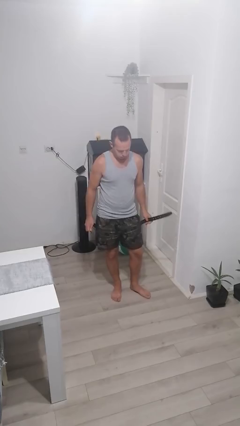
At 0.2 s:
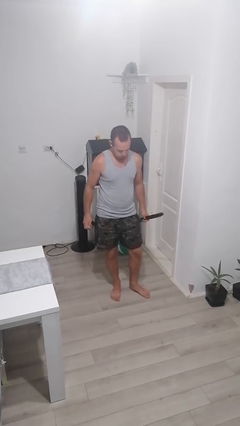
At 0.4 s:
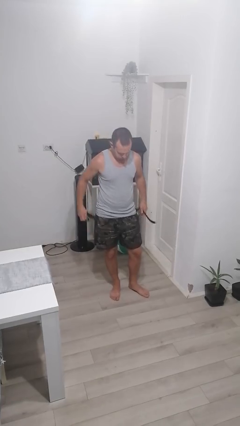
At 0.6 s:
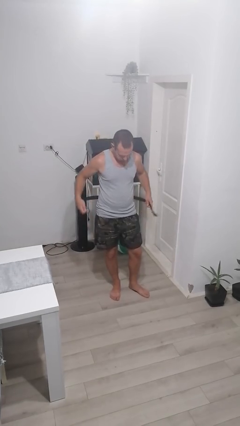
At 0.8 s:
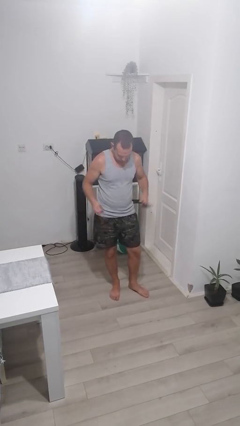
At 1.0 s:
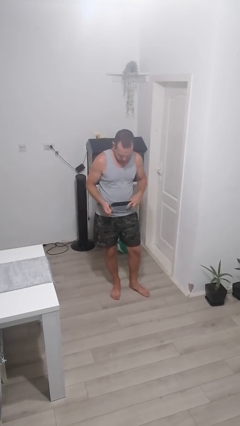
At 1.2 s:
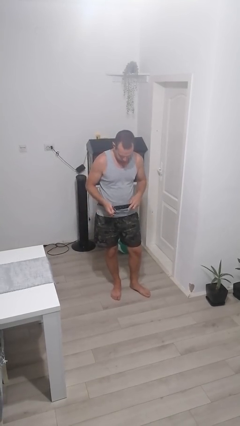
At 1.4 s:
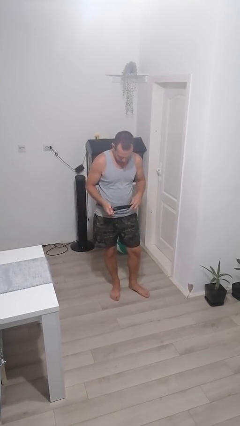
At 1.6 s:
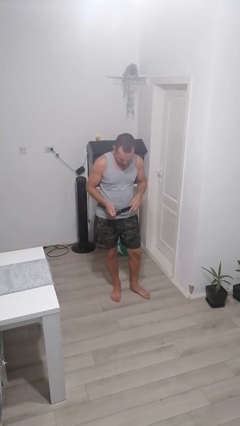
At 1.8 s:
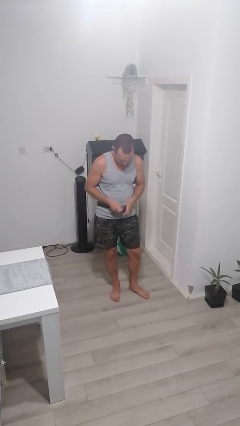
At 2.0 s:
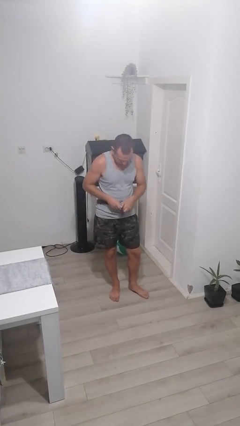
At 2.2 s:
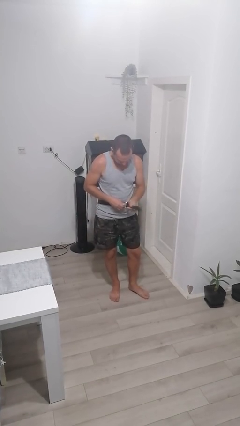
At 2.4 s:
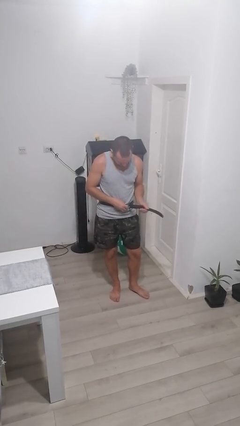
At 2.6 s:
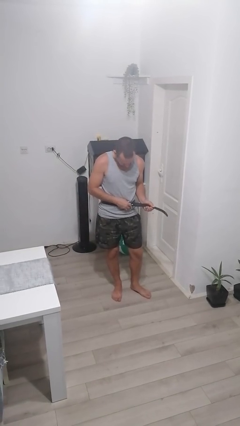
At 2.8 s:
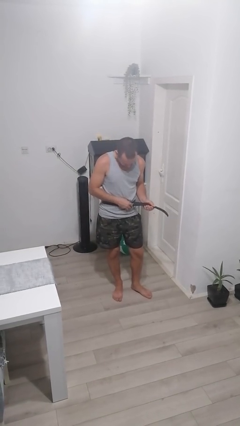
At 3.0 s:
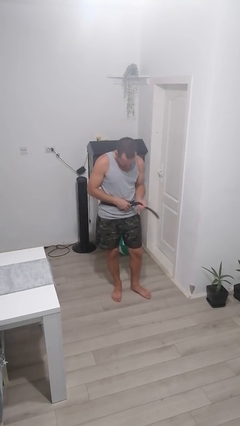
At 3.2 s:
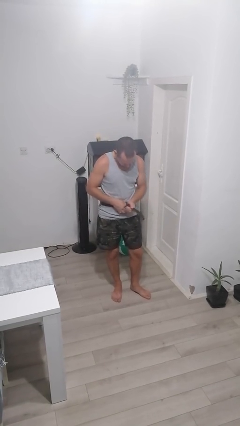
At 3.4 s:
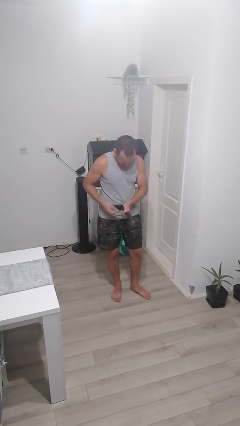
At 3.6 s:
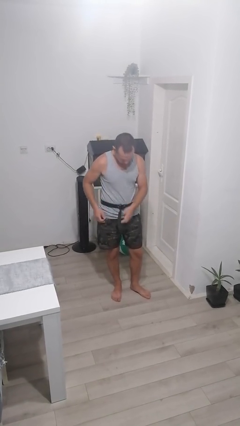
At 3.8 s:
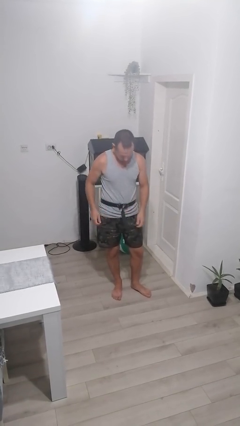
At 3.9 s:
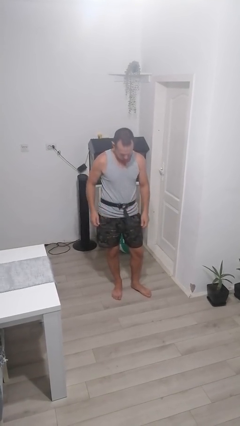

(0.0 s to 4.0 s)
person puts on belt

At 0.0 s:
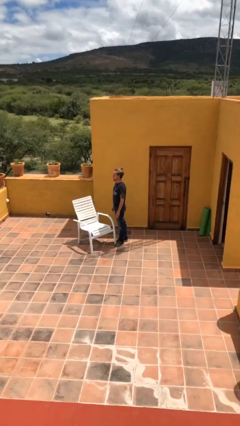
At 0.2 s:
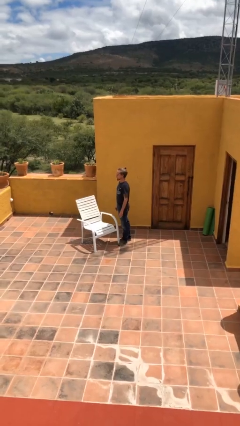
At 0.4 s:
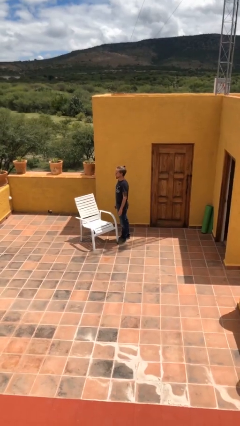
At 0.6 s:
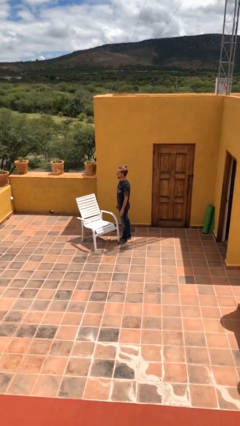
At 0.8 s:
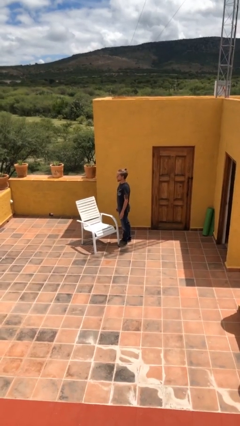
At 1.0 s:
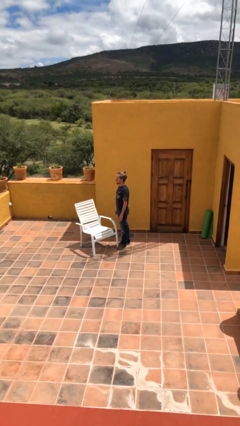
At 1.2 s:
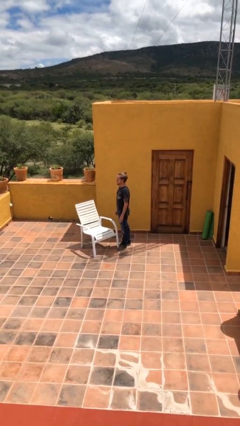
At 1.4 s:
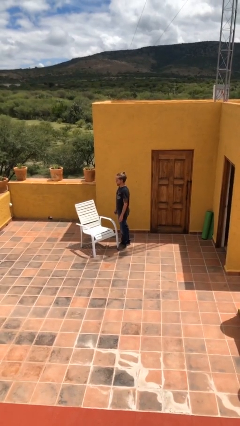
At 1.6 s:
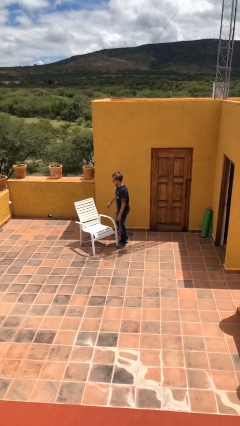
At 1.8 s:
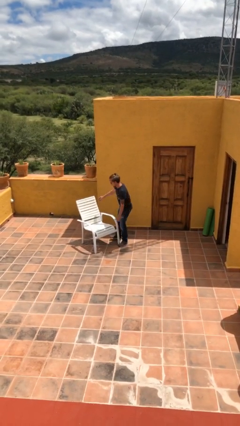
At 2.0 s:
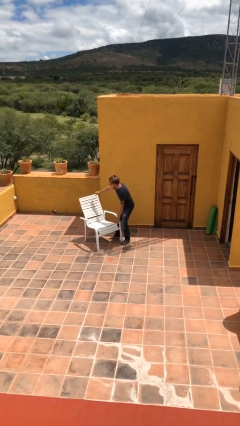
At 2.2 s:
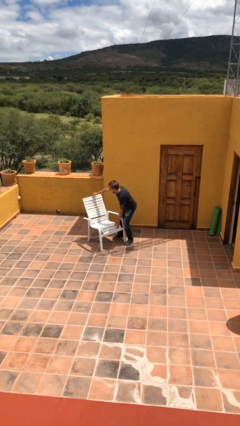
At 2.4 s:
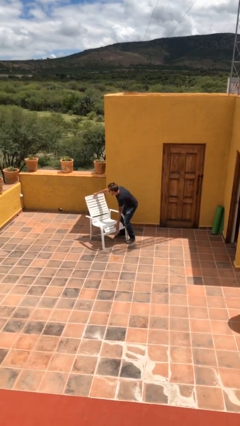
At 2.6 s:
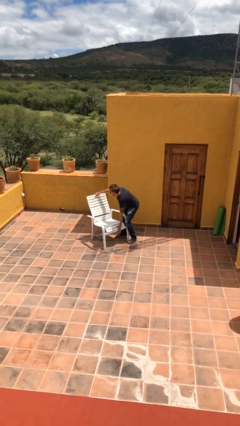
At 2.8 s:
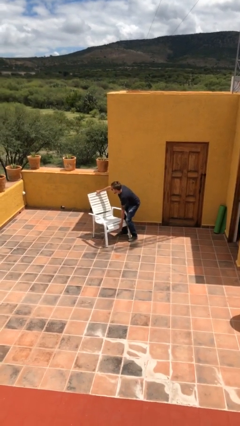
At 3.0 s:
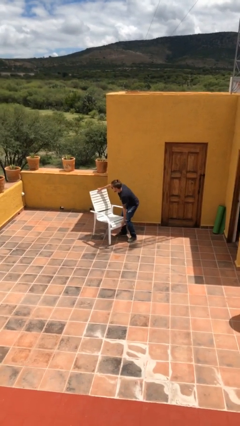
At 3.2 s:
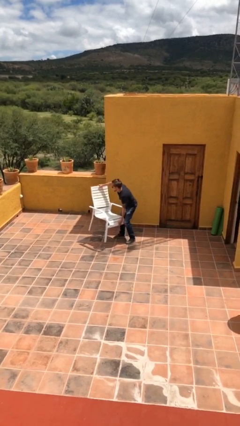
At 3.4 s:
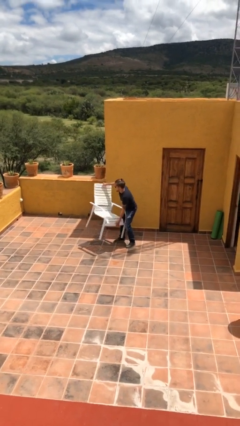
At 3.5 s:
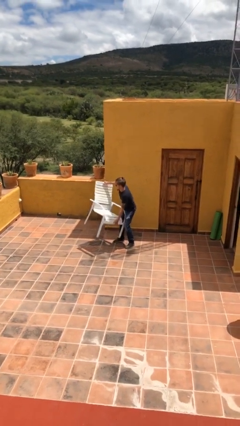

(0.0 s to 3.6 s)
person picks up object from floor

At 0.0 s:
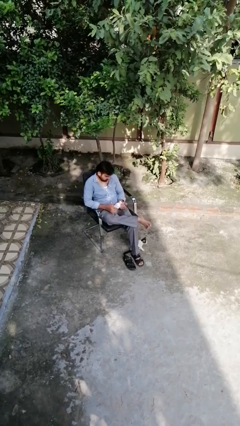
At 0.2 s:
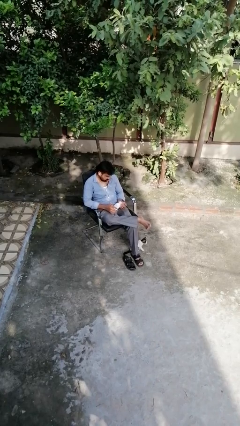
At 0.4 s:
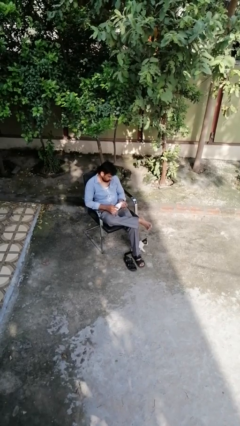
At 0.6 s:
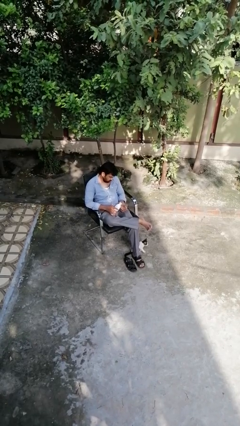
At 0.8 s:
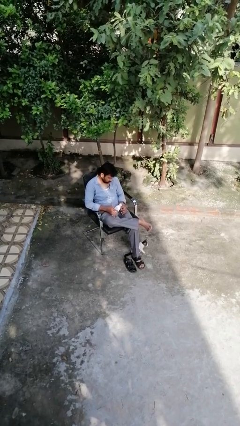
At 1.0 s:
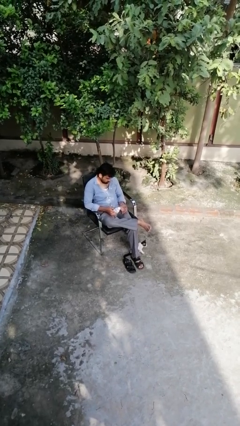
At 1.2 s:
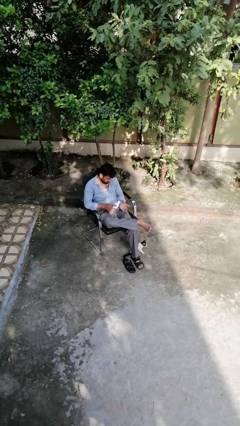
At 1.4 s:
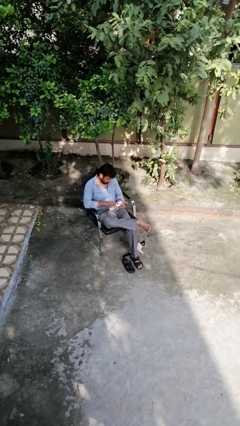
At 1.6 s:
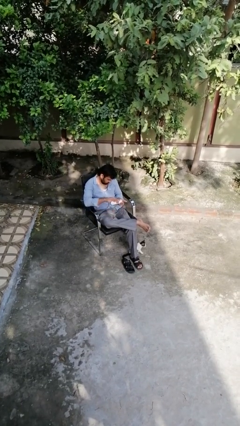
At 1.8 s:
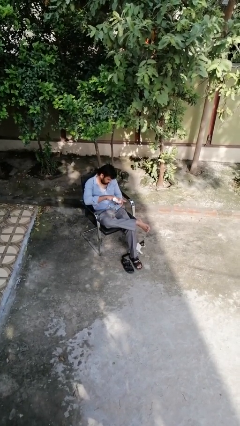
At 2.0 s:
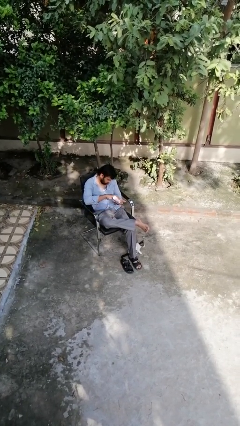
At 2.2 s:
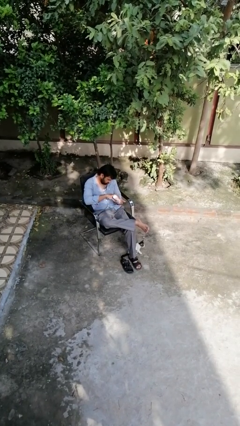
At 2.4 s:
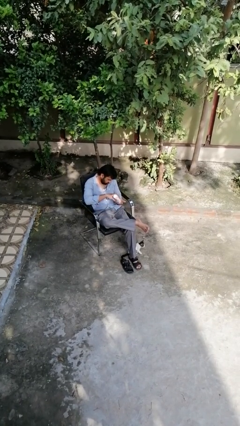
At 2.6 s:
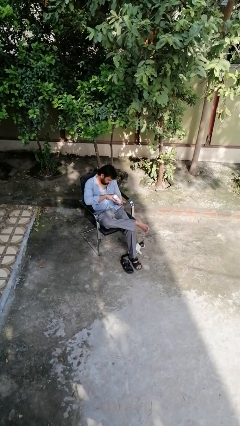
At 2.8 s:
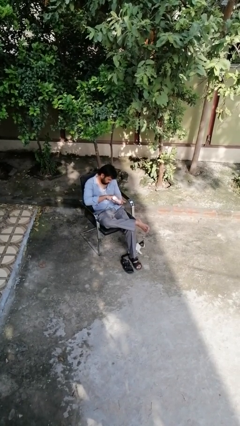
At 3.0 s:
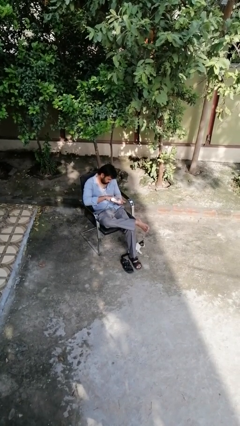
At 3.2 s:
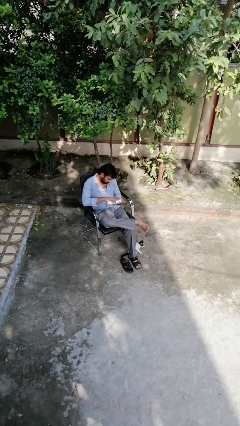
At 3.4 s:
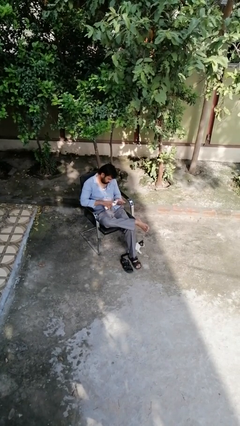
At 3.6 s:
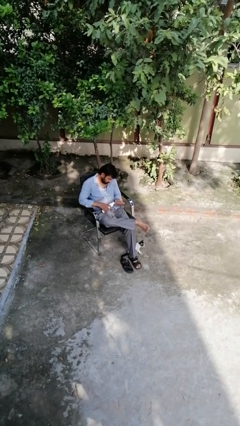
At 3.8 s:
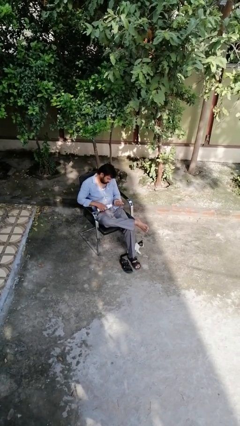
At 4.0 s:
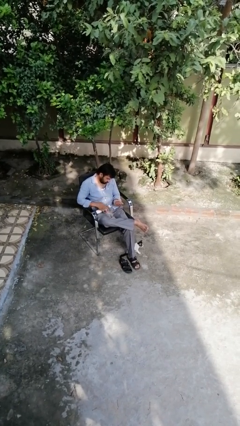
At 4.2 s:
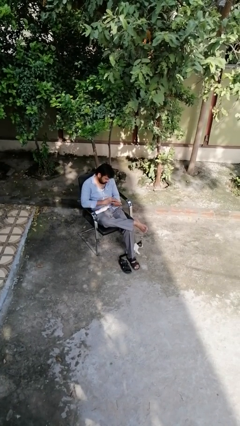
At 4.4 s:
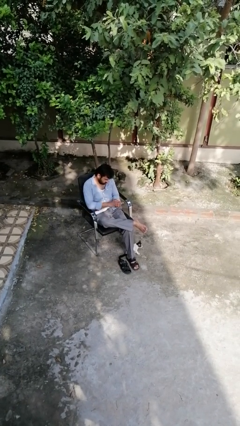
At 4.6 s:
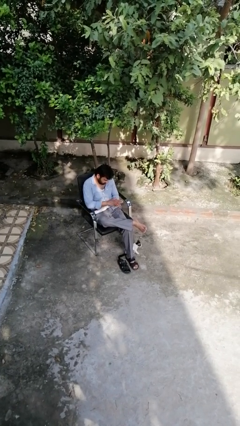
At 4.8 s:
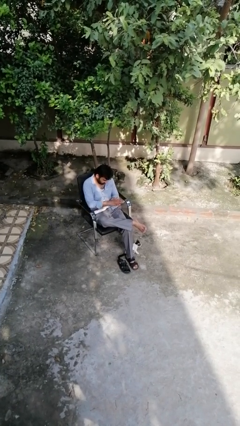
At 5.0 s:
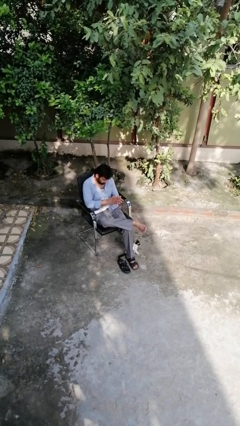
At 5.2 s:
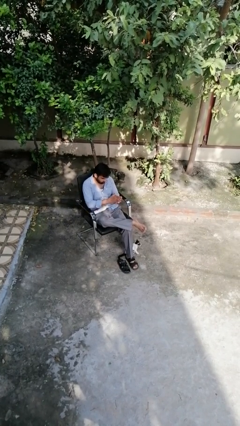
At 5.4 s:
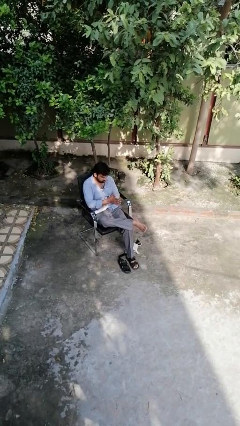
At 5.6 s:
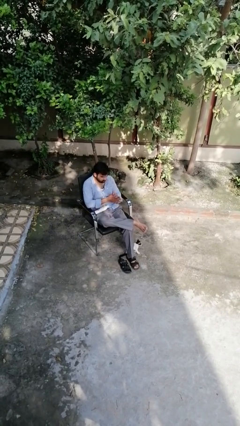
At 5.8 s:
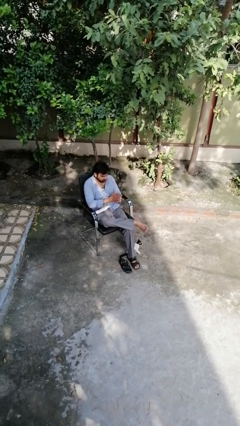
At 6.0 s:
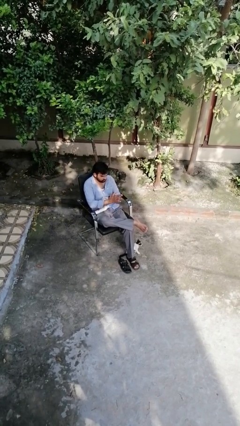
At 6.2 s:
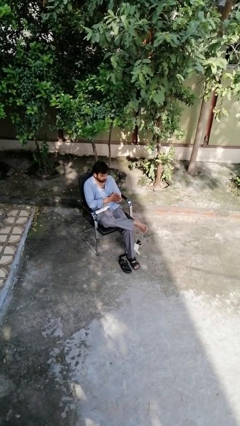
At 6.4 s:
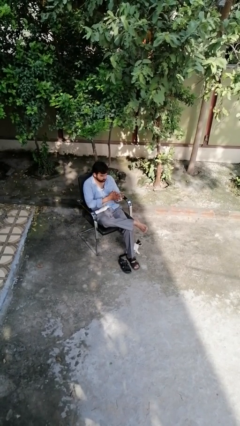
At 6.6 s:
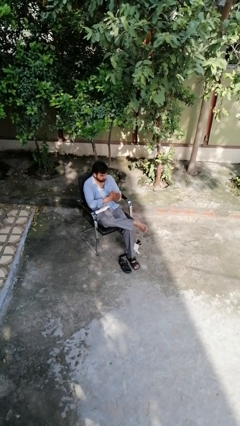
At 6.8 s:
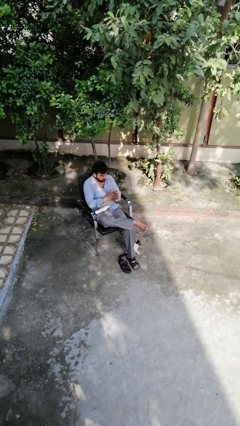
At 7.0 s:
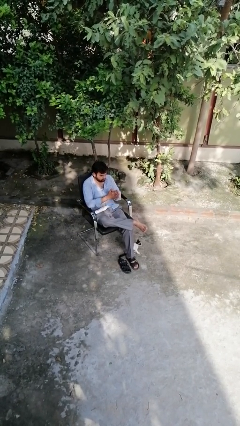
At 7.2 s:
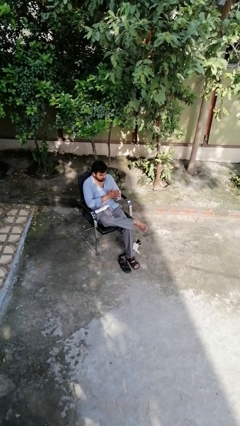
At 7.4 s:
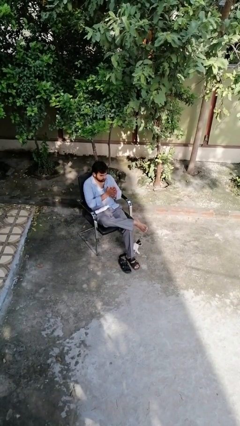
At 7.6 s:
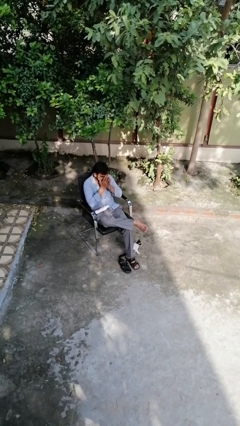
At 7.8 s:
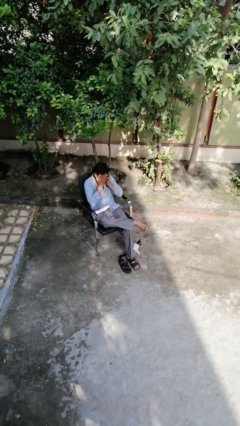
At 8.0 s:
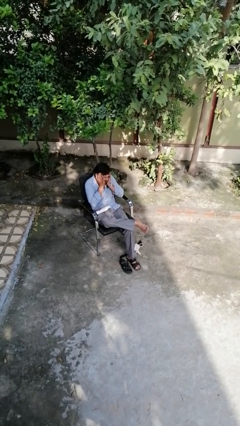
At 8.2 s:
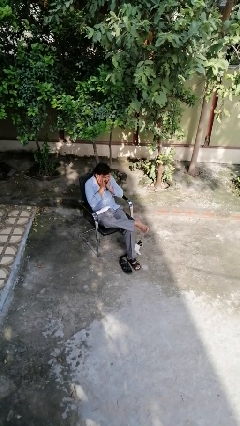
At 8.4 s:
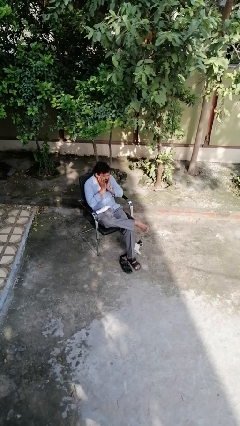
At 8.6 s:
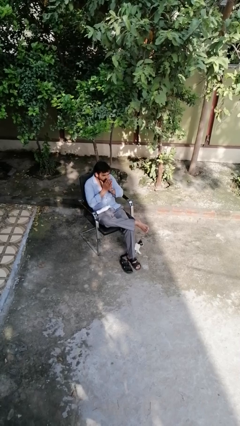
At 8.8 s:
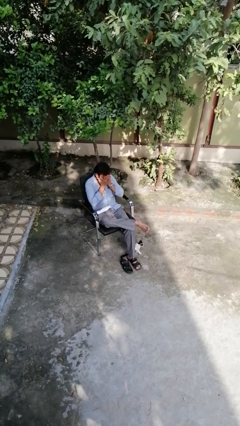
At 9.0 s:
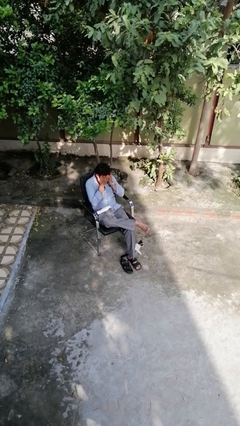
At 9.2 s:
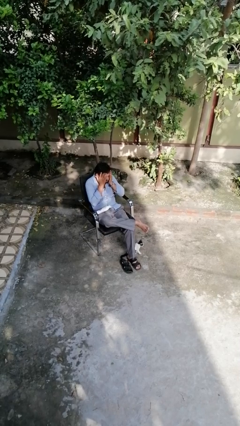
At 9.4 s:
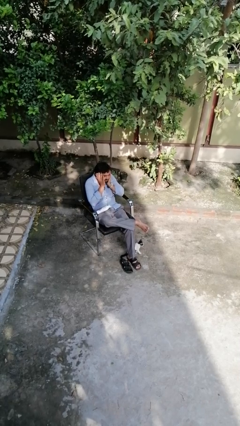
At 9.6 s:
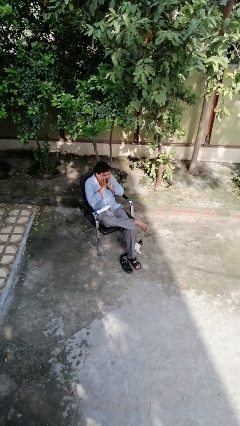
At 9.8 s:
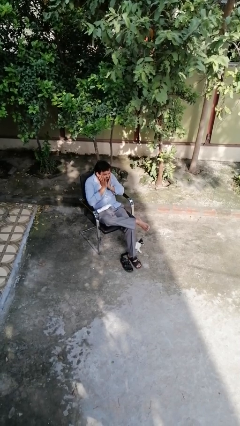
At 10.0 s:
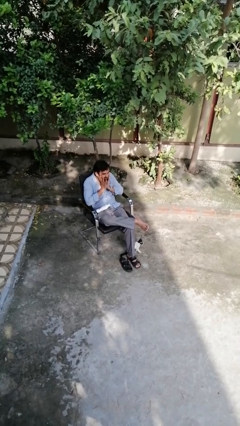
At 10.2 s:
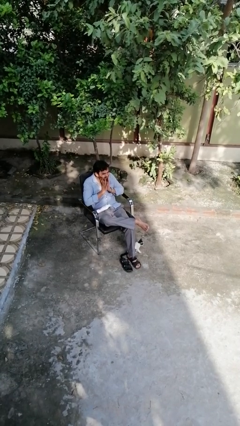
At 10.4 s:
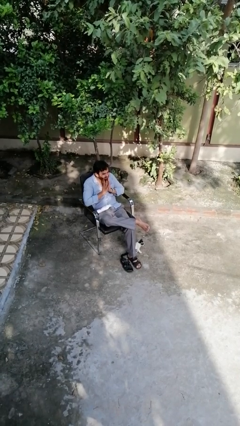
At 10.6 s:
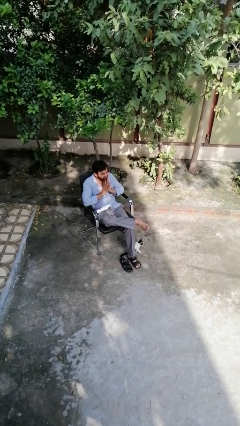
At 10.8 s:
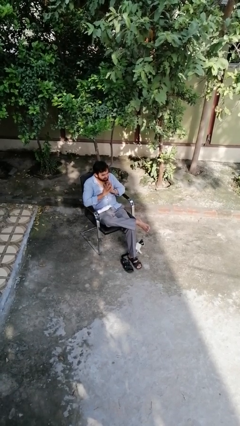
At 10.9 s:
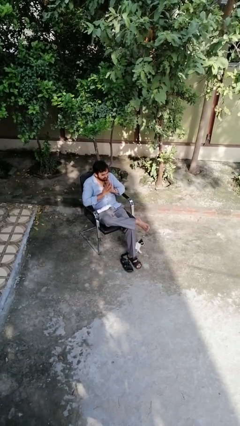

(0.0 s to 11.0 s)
person applies facial moisturizer
